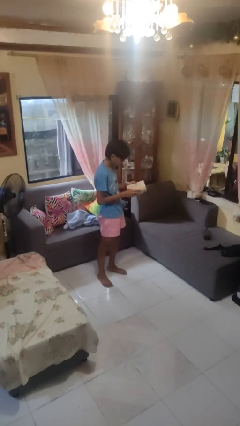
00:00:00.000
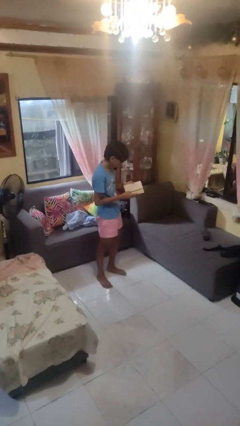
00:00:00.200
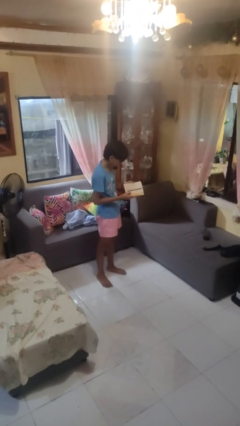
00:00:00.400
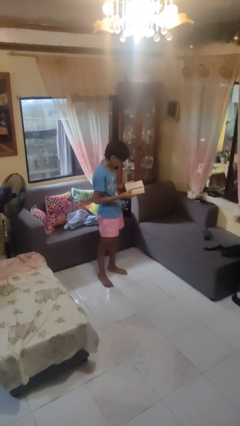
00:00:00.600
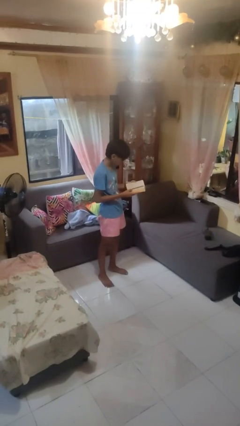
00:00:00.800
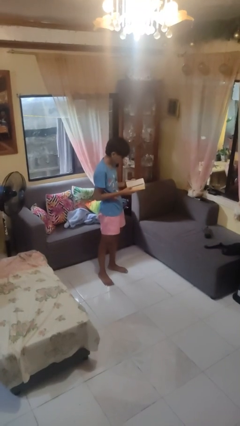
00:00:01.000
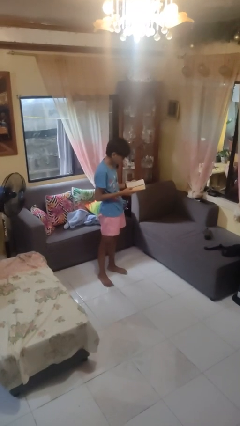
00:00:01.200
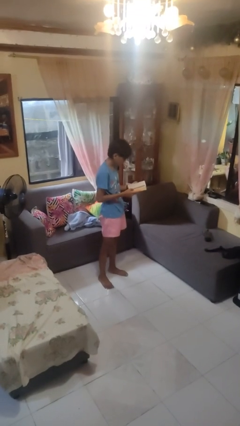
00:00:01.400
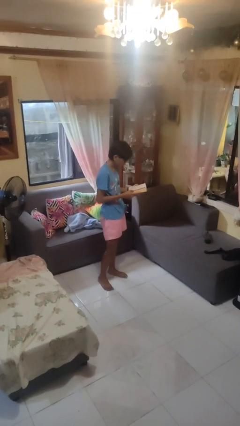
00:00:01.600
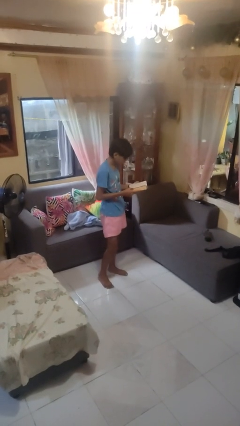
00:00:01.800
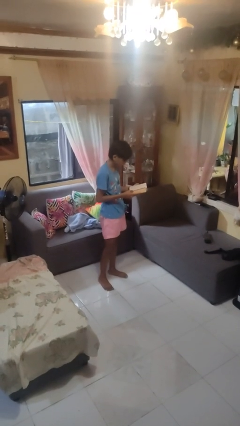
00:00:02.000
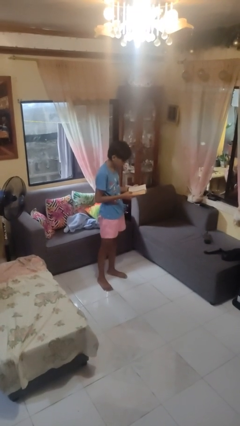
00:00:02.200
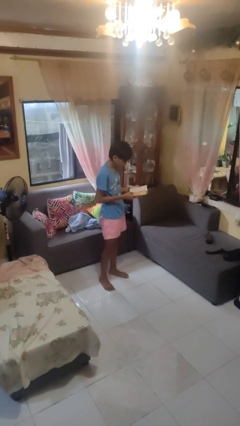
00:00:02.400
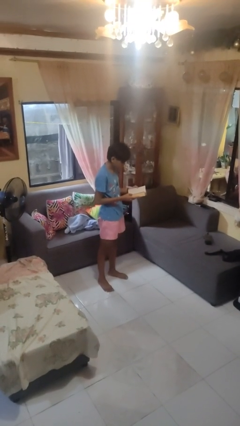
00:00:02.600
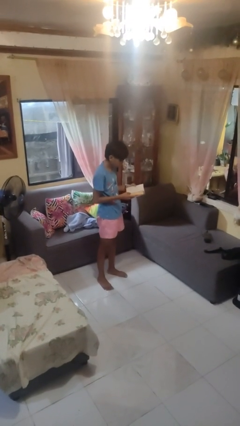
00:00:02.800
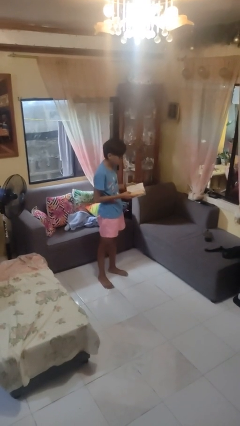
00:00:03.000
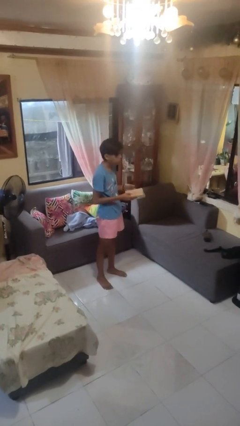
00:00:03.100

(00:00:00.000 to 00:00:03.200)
person reads book

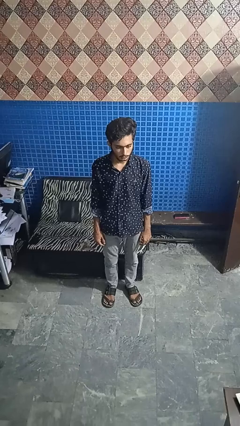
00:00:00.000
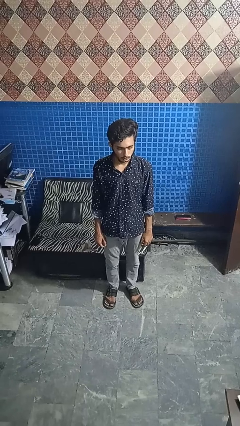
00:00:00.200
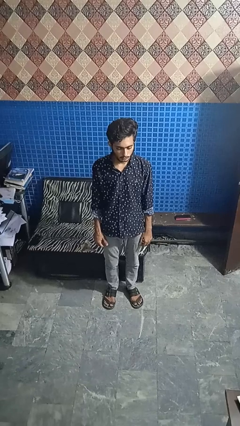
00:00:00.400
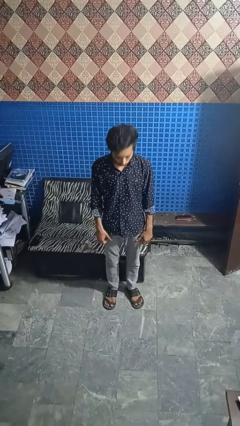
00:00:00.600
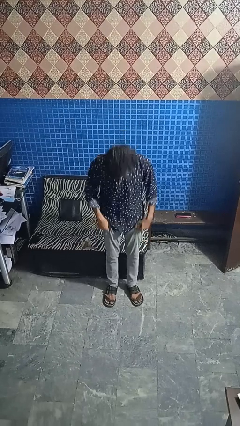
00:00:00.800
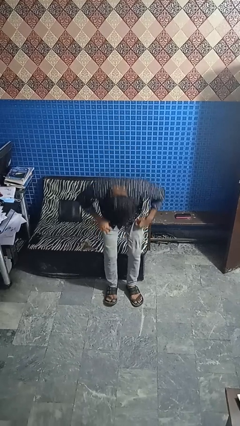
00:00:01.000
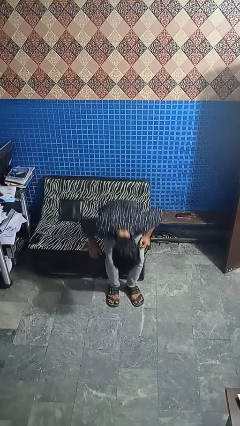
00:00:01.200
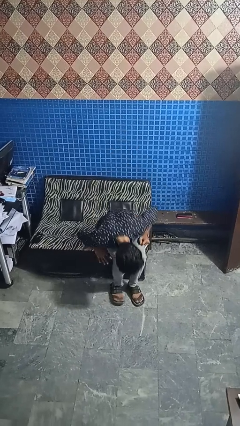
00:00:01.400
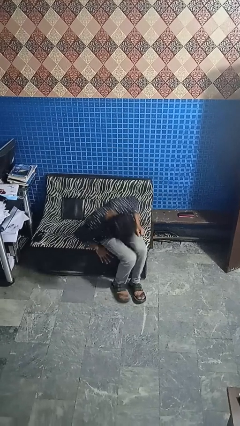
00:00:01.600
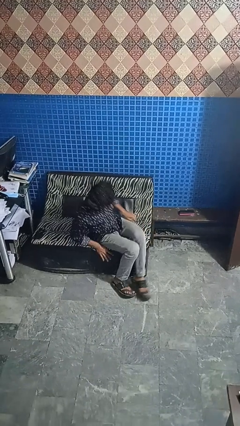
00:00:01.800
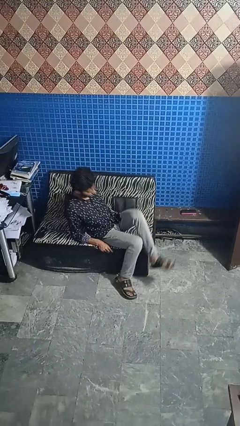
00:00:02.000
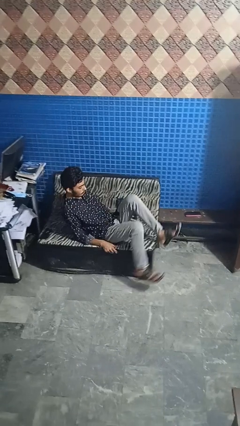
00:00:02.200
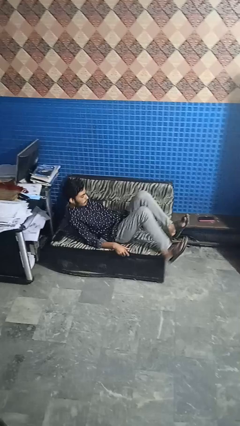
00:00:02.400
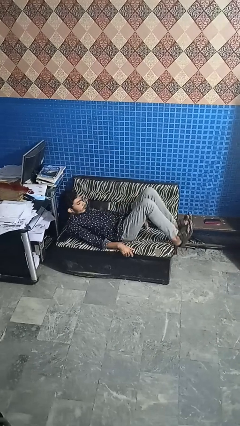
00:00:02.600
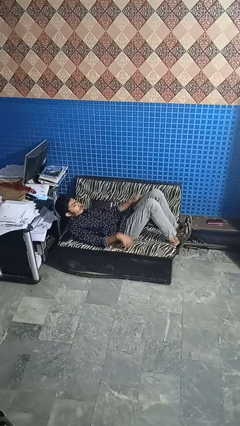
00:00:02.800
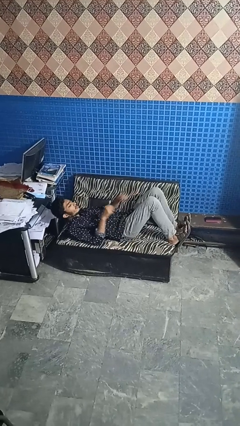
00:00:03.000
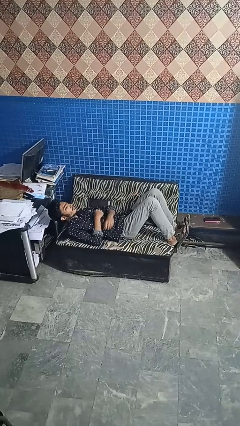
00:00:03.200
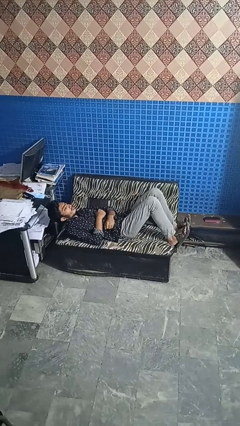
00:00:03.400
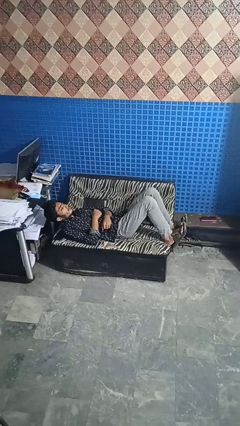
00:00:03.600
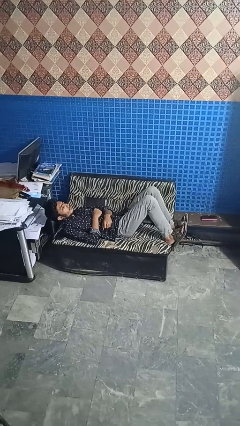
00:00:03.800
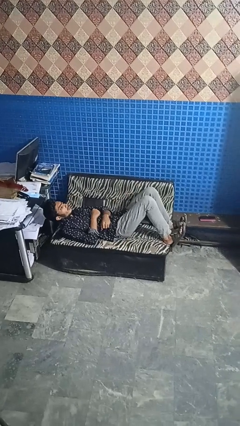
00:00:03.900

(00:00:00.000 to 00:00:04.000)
person lies down on couch

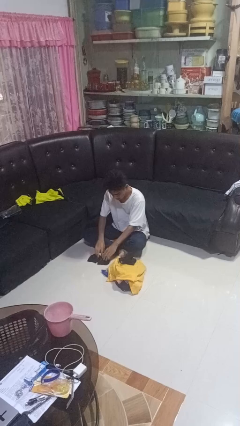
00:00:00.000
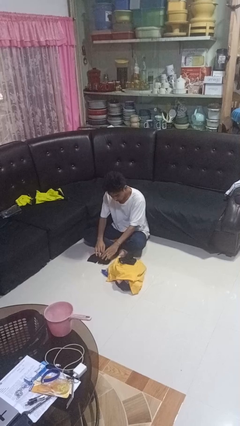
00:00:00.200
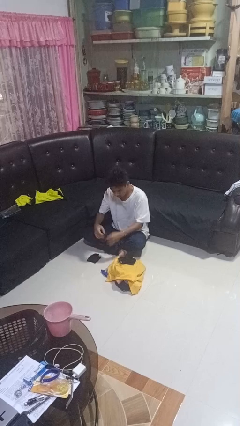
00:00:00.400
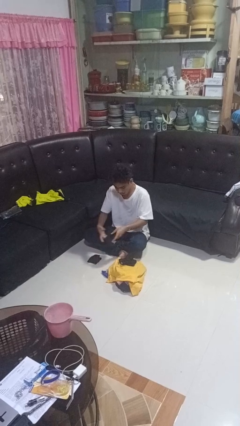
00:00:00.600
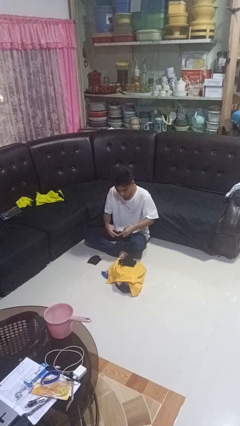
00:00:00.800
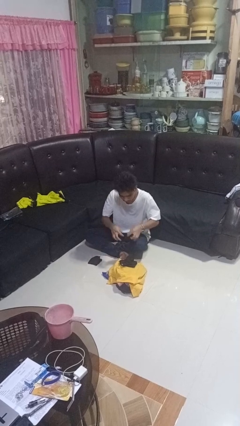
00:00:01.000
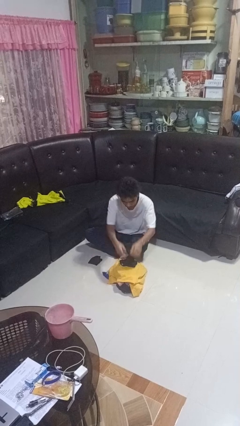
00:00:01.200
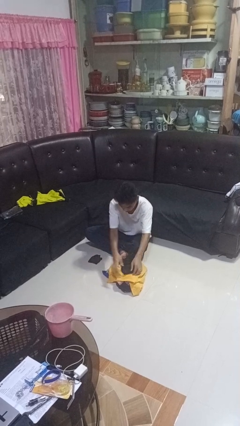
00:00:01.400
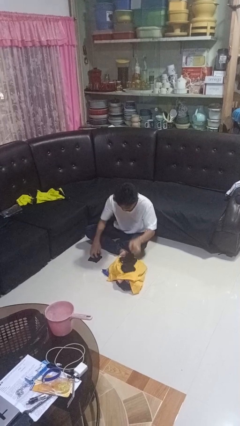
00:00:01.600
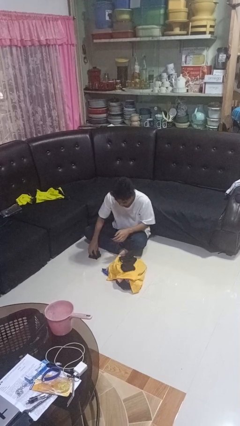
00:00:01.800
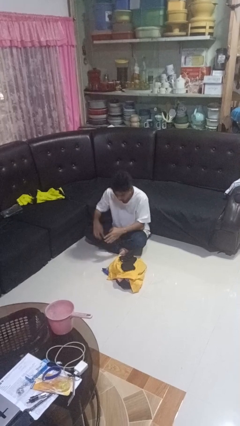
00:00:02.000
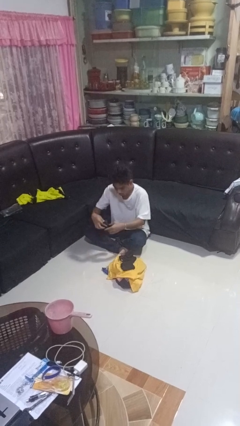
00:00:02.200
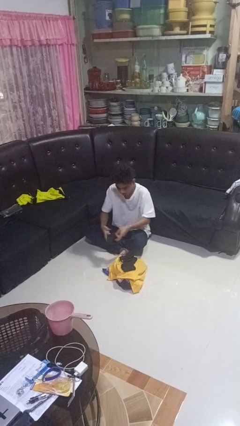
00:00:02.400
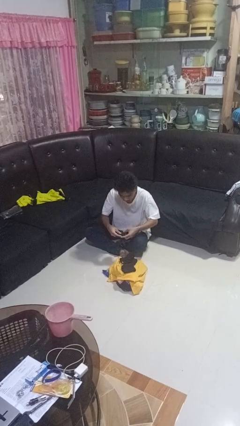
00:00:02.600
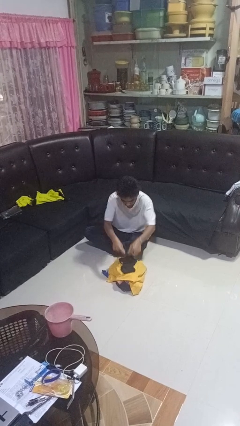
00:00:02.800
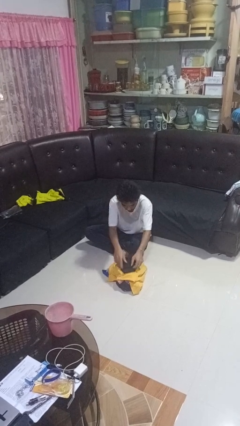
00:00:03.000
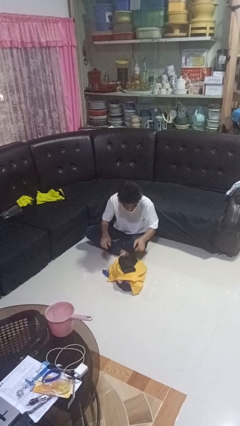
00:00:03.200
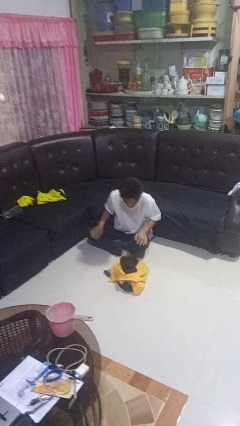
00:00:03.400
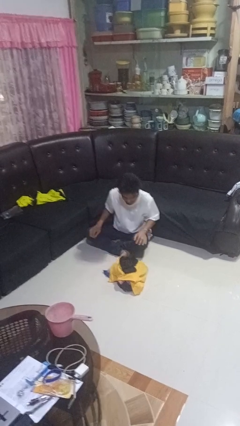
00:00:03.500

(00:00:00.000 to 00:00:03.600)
person folds socks

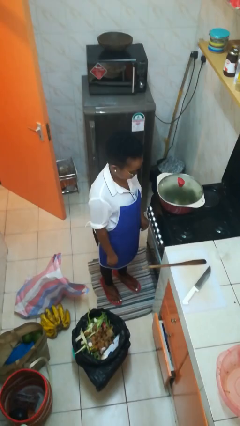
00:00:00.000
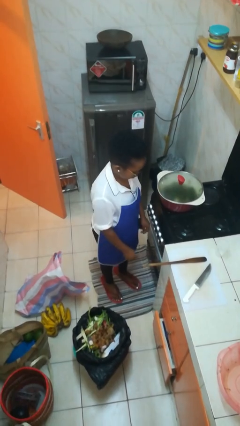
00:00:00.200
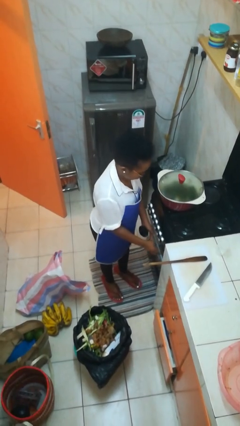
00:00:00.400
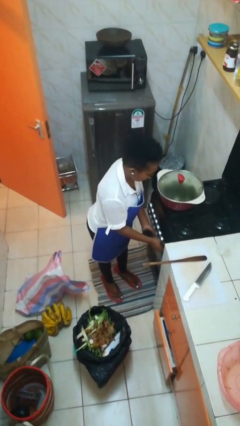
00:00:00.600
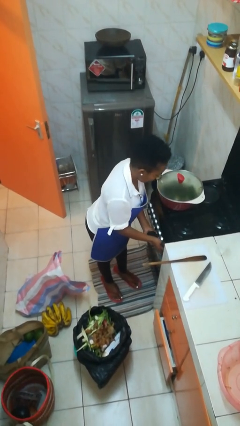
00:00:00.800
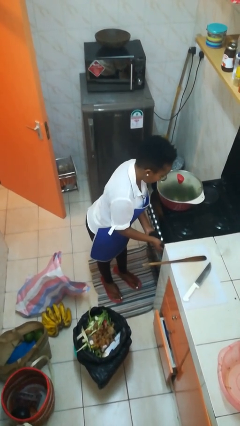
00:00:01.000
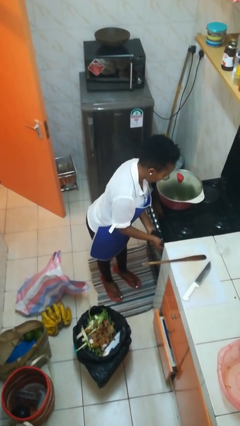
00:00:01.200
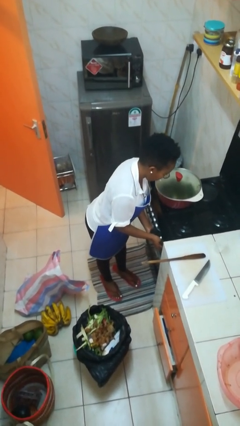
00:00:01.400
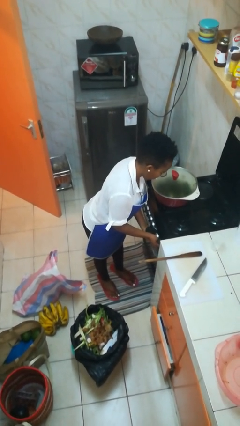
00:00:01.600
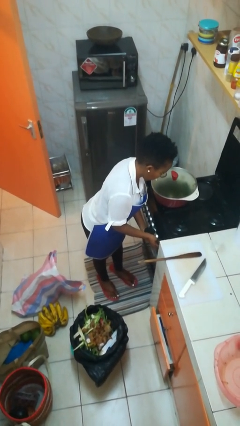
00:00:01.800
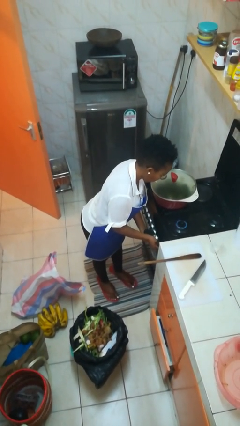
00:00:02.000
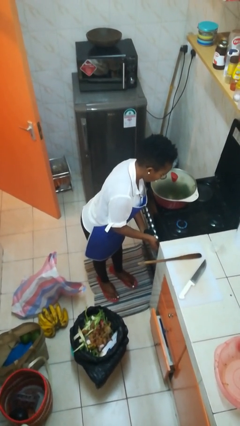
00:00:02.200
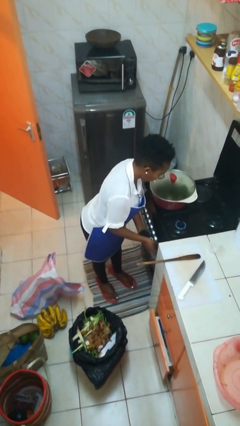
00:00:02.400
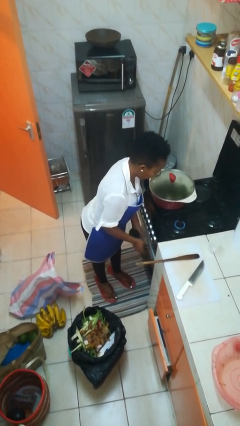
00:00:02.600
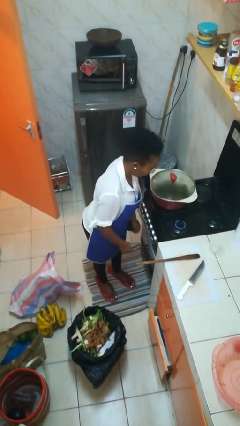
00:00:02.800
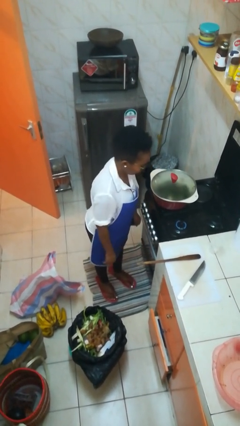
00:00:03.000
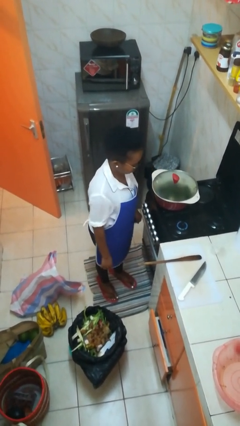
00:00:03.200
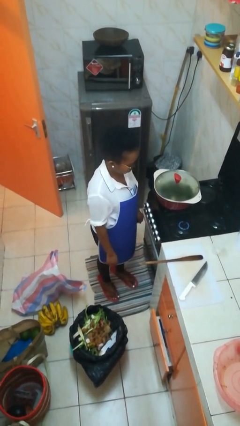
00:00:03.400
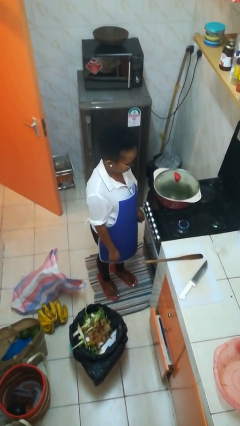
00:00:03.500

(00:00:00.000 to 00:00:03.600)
person turns on stovetop

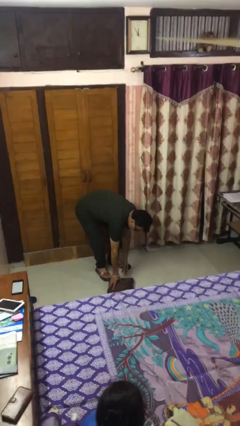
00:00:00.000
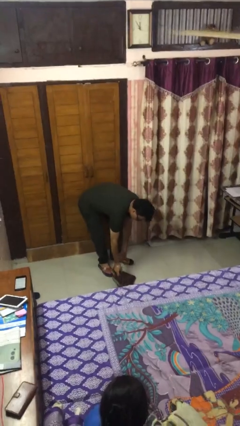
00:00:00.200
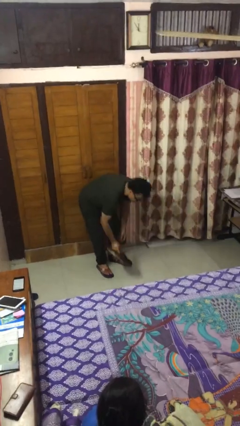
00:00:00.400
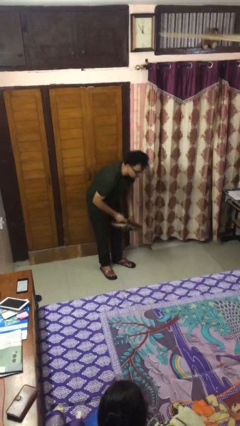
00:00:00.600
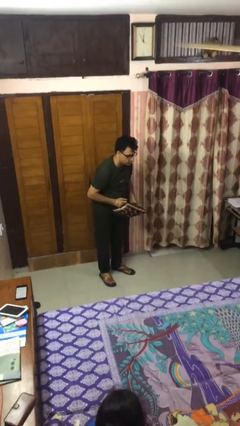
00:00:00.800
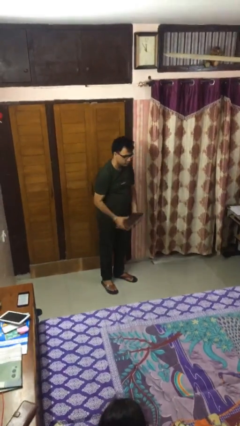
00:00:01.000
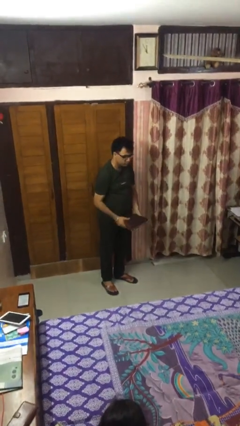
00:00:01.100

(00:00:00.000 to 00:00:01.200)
person picks up object from floor

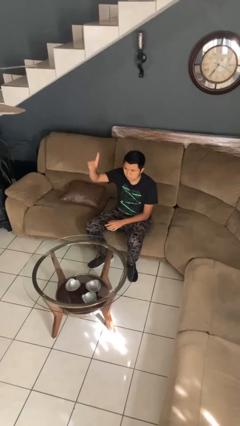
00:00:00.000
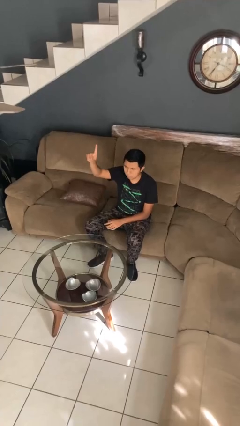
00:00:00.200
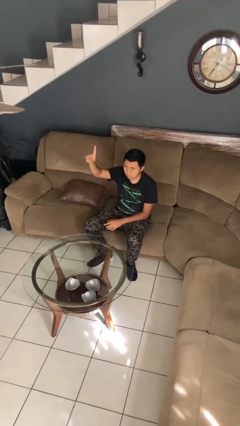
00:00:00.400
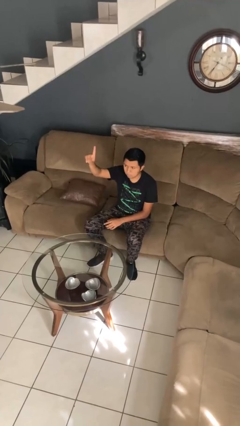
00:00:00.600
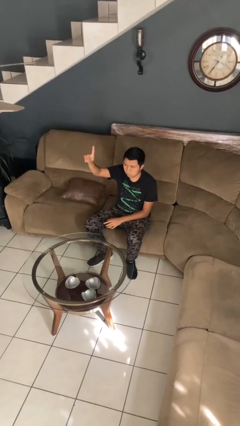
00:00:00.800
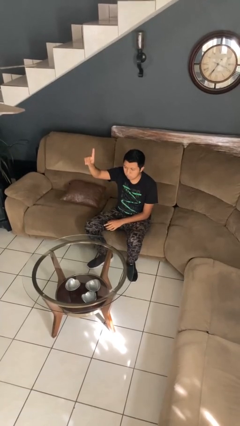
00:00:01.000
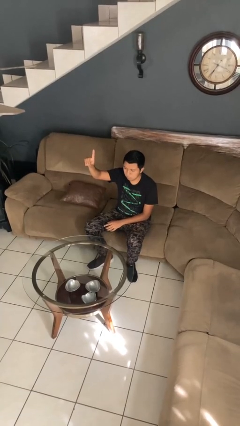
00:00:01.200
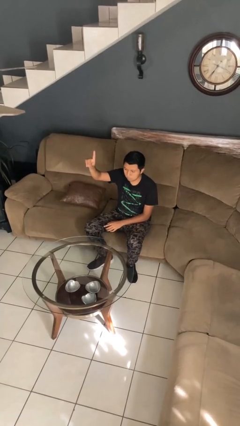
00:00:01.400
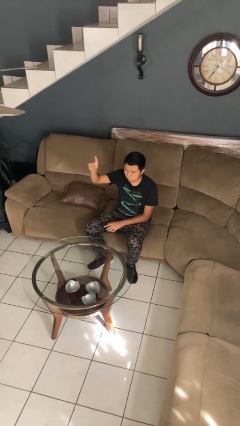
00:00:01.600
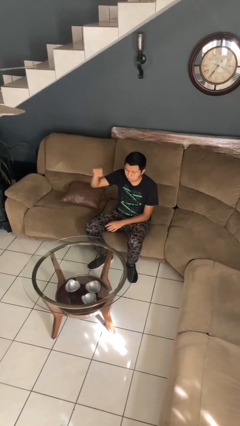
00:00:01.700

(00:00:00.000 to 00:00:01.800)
person gestures number one
